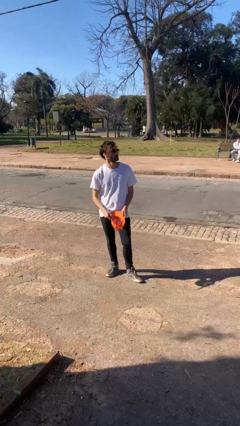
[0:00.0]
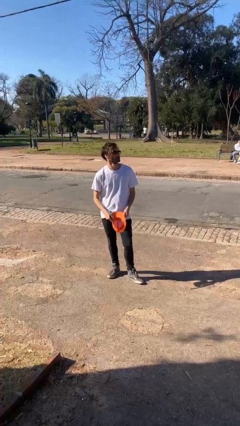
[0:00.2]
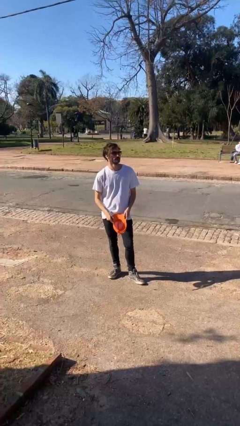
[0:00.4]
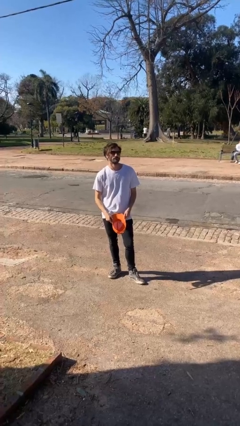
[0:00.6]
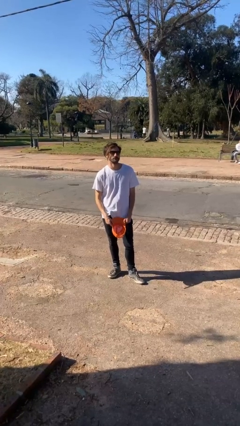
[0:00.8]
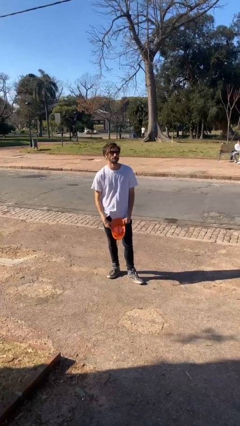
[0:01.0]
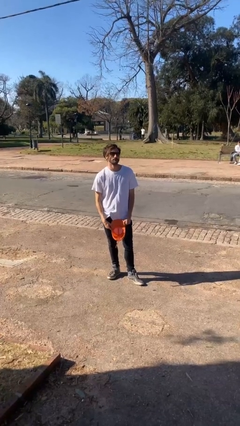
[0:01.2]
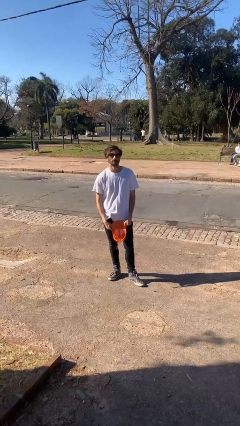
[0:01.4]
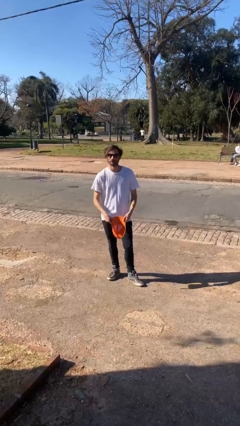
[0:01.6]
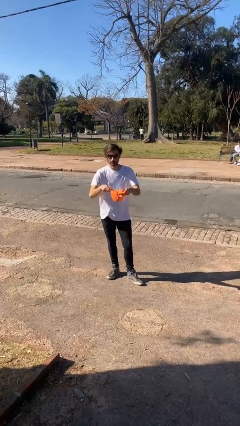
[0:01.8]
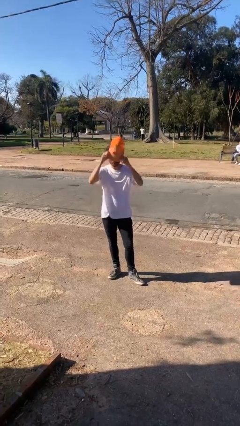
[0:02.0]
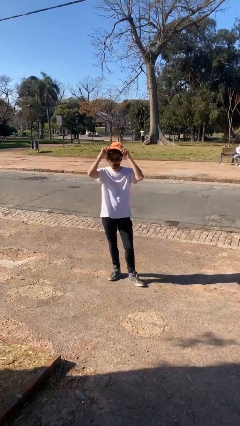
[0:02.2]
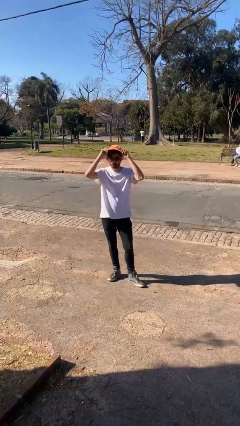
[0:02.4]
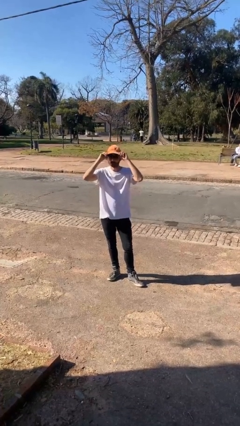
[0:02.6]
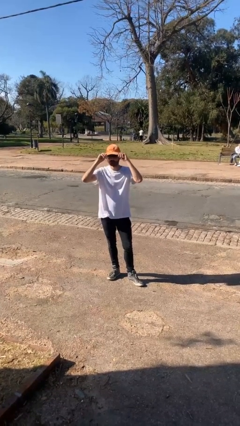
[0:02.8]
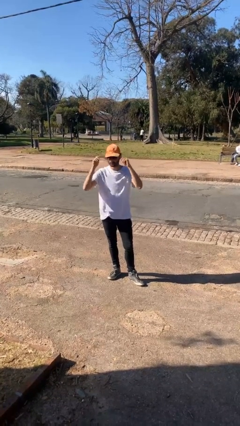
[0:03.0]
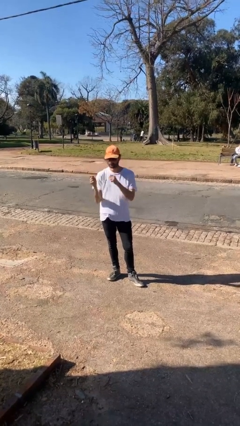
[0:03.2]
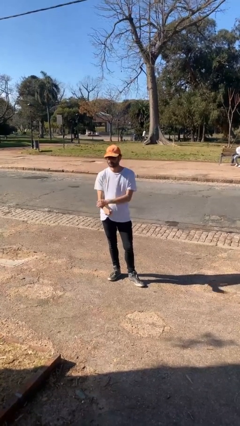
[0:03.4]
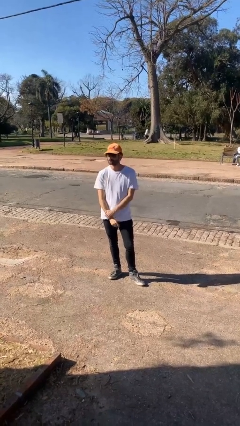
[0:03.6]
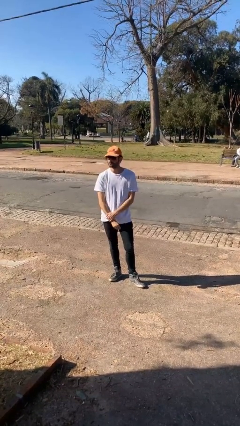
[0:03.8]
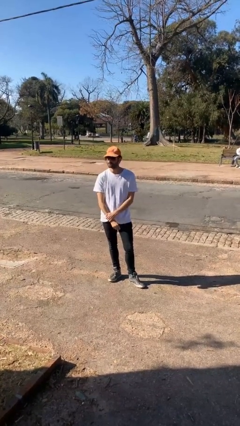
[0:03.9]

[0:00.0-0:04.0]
person puts on hat

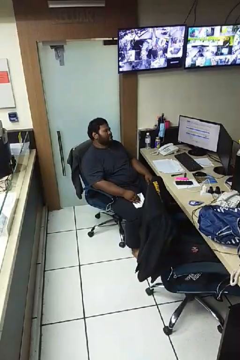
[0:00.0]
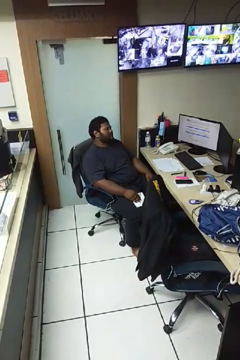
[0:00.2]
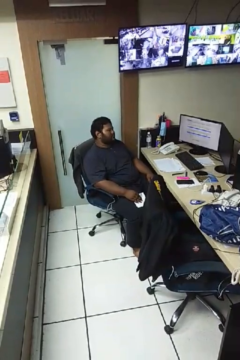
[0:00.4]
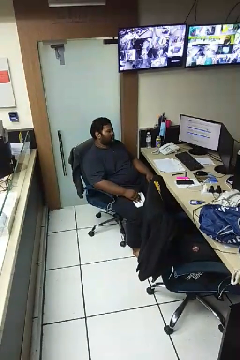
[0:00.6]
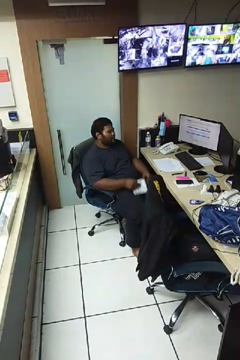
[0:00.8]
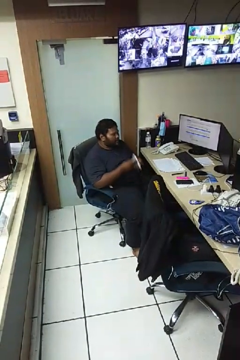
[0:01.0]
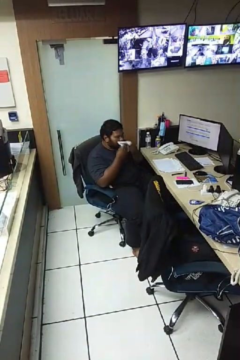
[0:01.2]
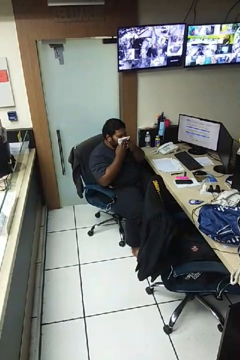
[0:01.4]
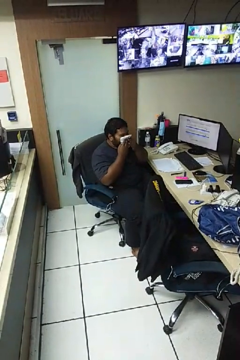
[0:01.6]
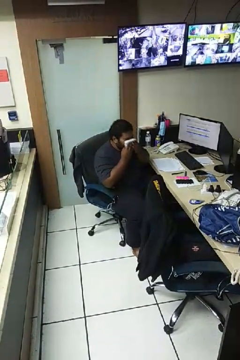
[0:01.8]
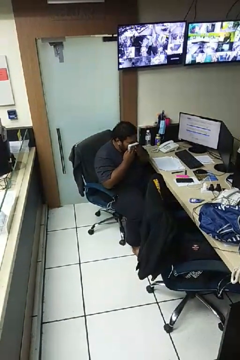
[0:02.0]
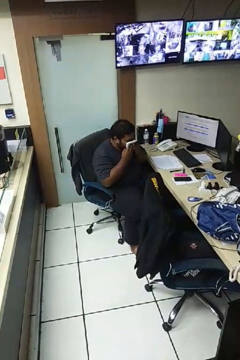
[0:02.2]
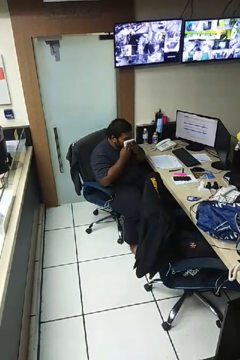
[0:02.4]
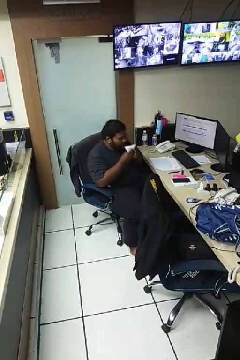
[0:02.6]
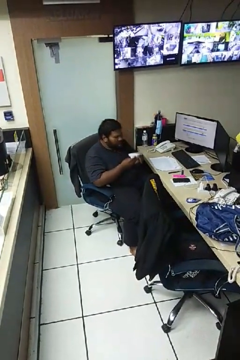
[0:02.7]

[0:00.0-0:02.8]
person blows nose

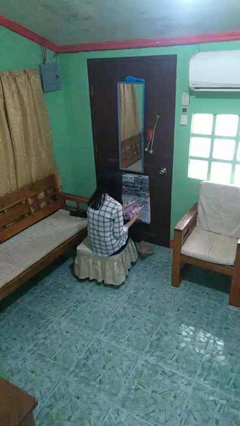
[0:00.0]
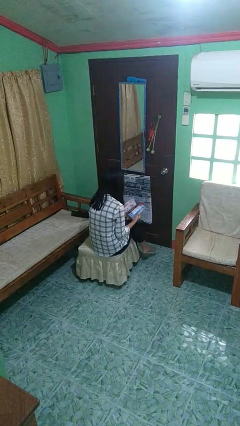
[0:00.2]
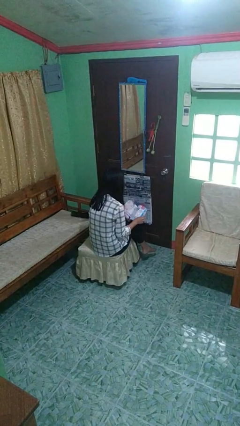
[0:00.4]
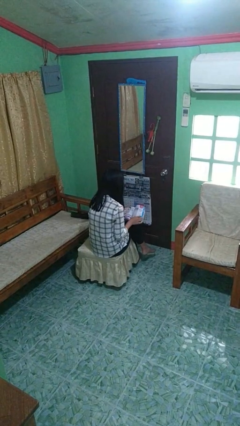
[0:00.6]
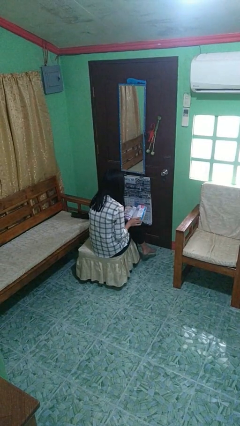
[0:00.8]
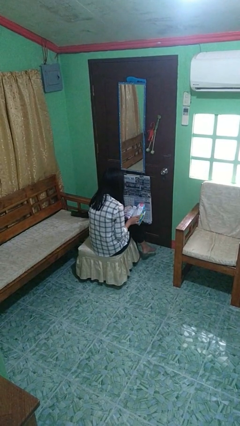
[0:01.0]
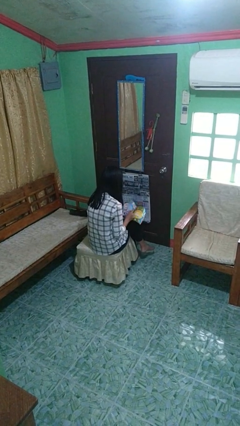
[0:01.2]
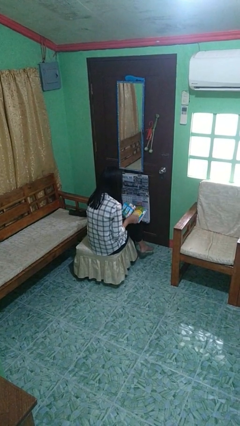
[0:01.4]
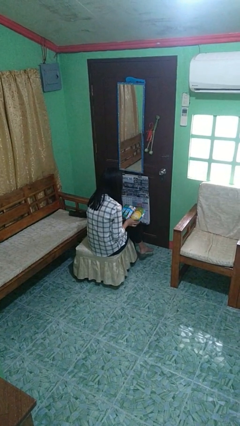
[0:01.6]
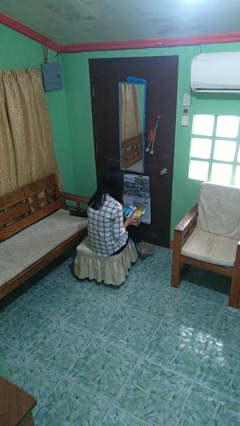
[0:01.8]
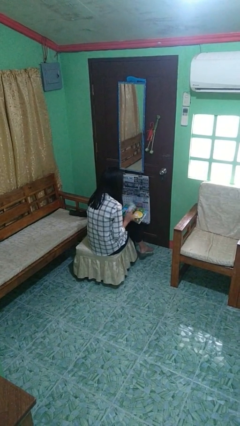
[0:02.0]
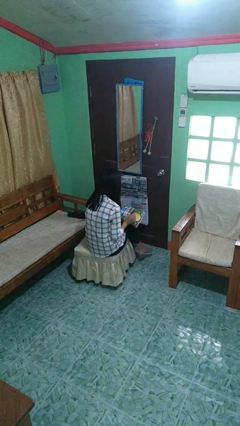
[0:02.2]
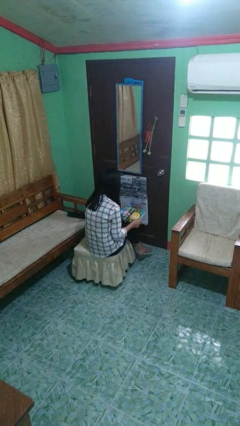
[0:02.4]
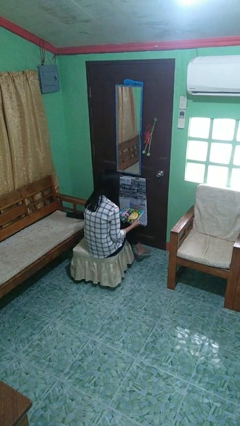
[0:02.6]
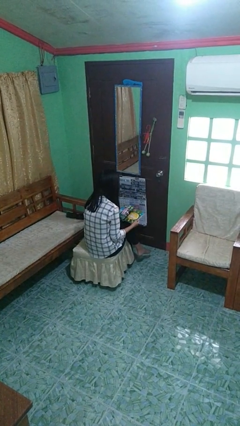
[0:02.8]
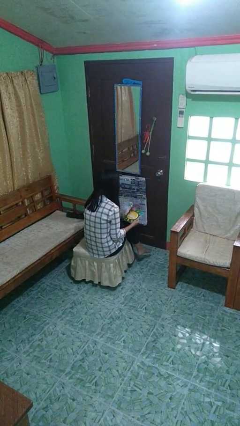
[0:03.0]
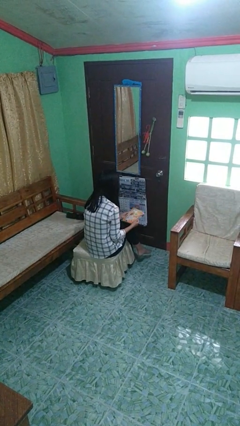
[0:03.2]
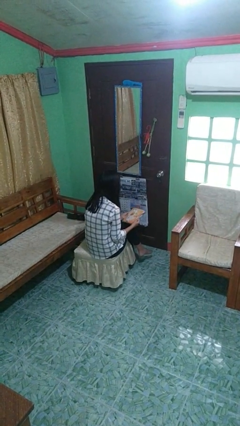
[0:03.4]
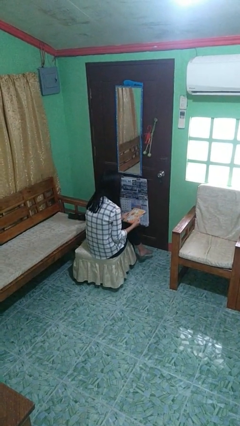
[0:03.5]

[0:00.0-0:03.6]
person reads magazine

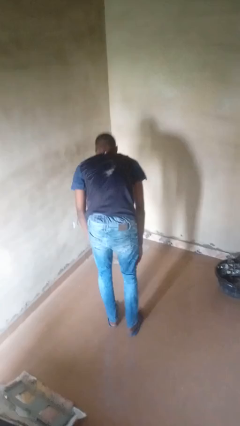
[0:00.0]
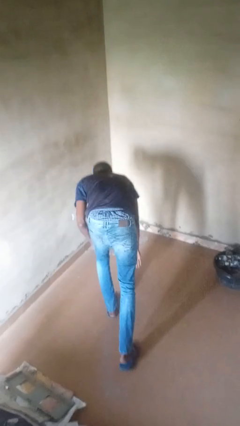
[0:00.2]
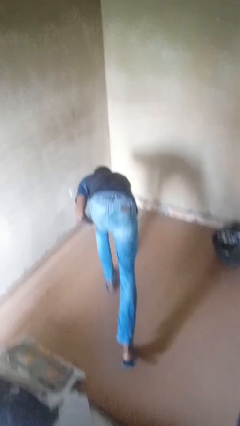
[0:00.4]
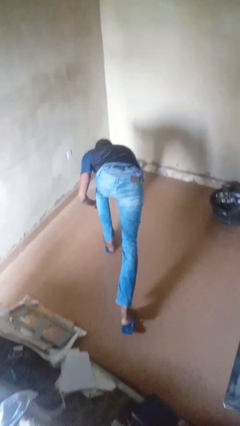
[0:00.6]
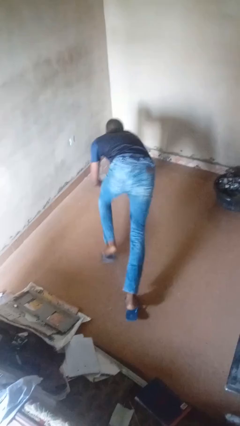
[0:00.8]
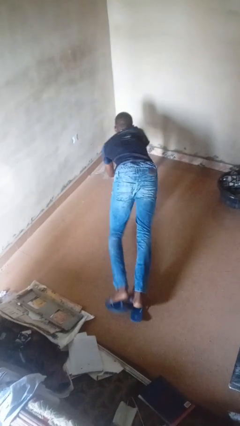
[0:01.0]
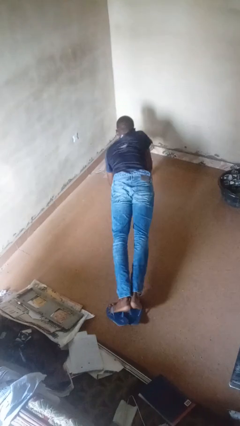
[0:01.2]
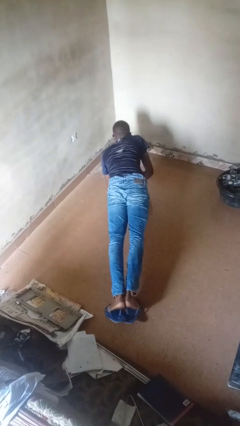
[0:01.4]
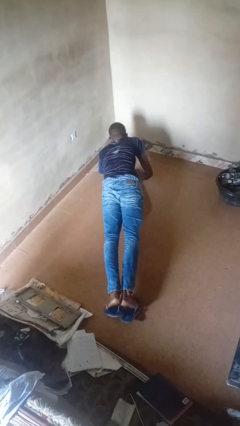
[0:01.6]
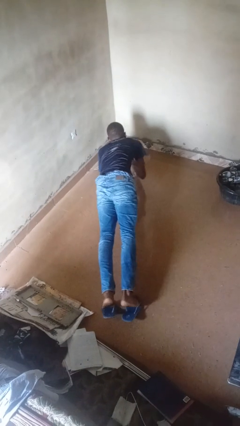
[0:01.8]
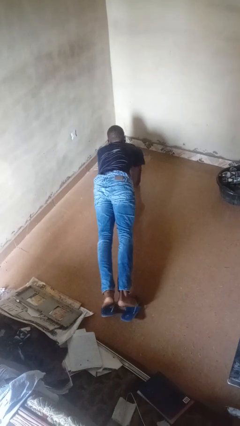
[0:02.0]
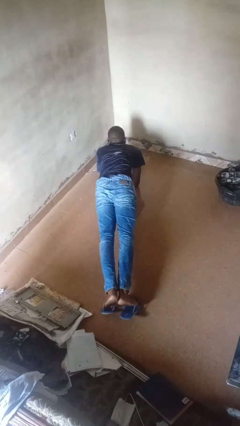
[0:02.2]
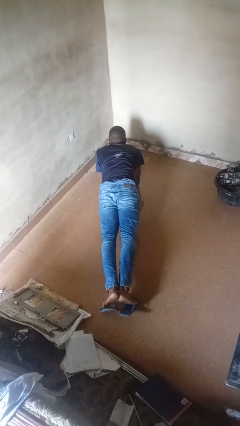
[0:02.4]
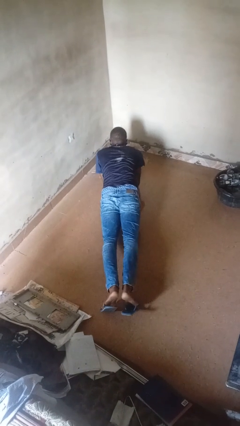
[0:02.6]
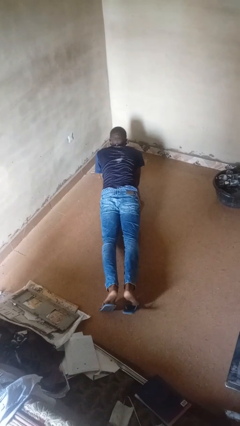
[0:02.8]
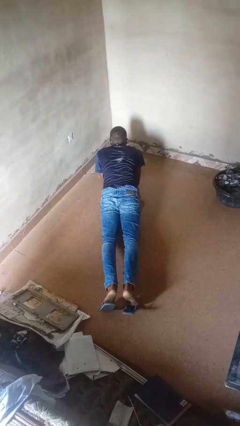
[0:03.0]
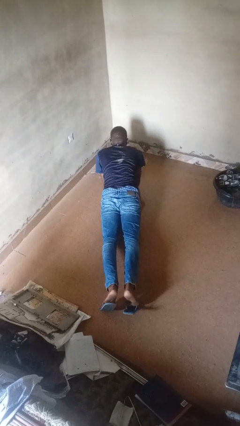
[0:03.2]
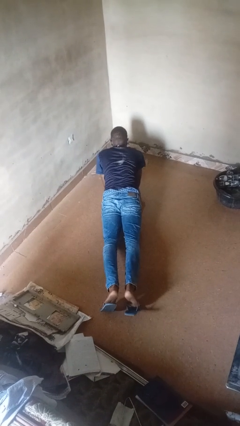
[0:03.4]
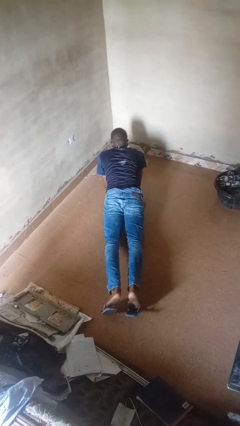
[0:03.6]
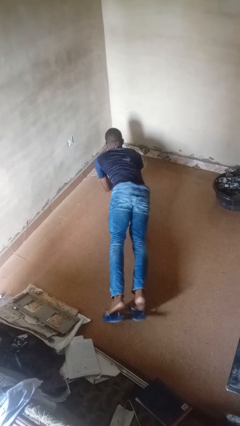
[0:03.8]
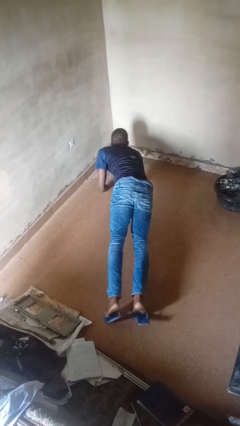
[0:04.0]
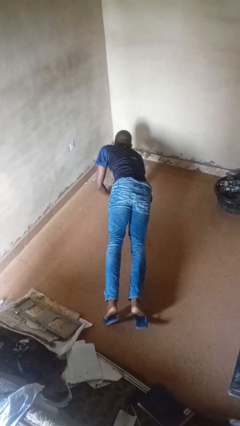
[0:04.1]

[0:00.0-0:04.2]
person exercises with plank

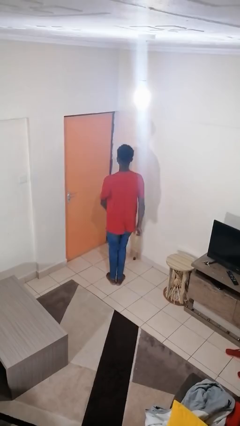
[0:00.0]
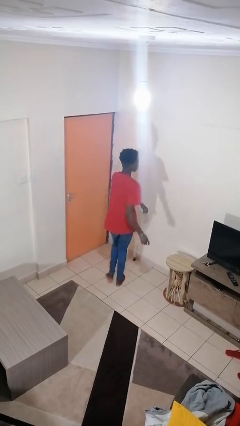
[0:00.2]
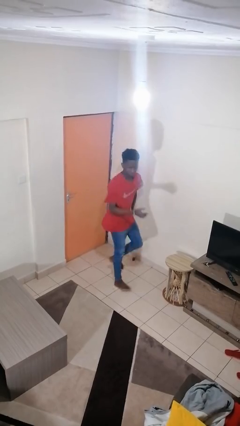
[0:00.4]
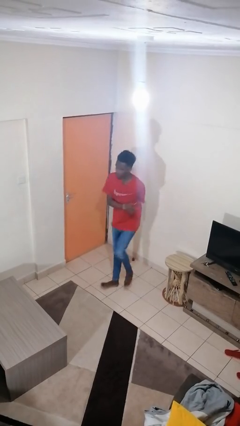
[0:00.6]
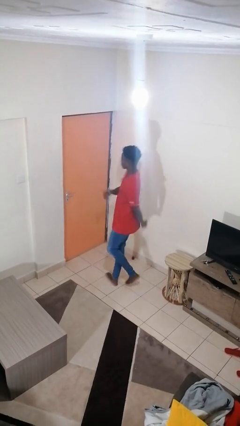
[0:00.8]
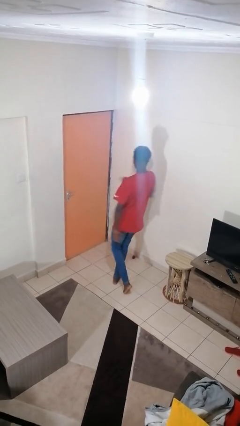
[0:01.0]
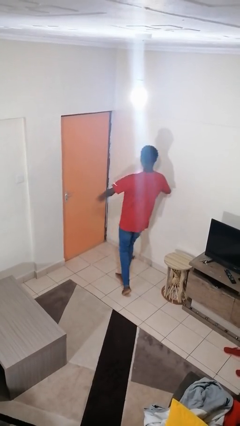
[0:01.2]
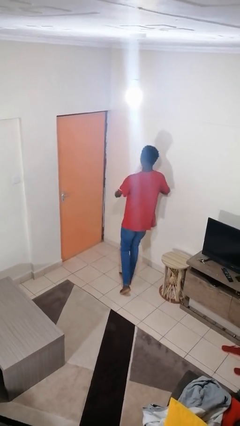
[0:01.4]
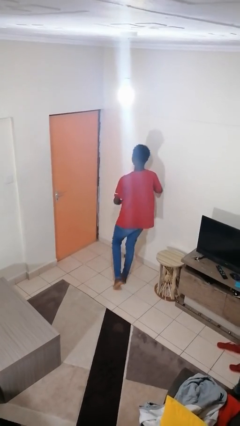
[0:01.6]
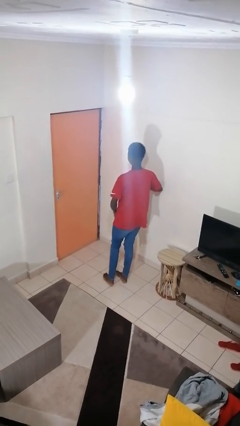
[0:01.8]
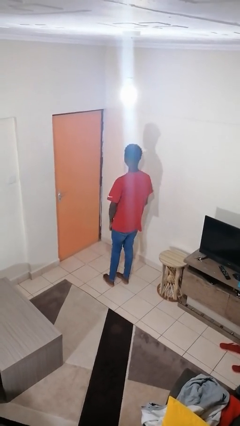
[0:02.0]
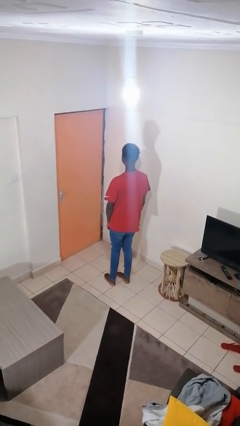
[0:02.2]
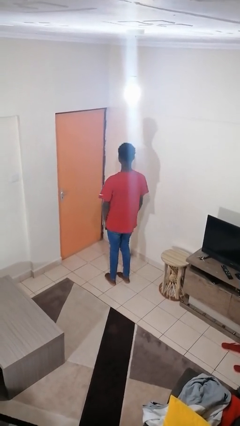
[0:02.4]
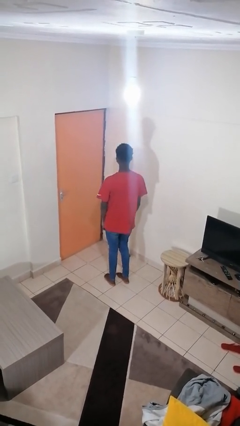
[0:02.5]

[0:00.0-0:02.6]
person twirls

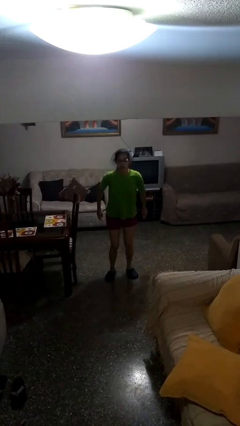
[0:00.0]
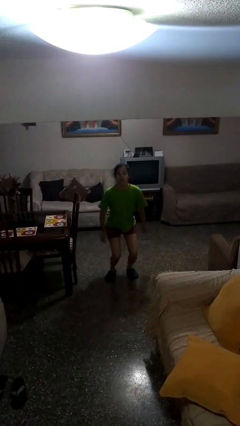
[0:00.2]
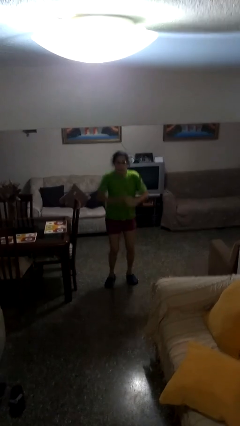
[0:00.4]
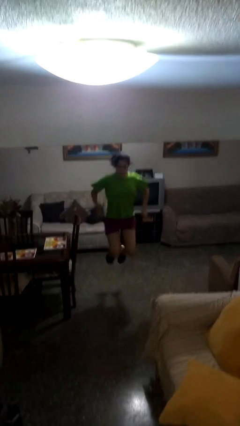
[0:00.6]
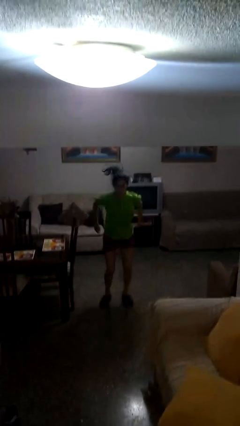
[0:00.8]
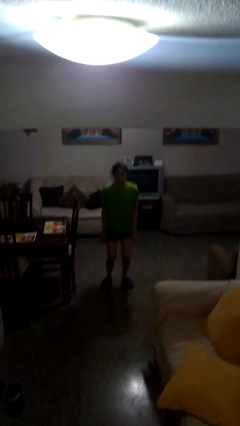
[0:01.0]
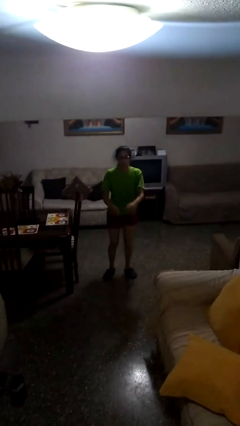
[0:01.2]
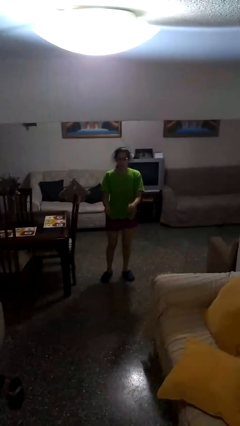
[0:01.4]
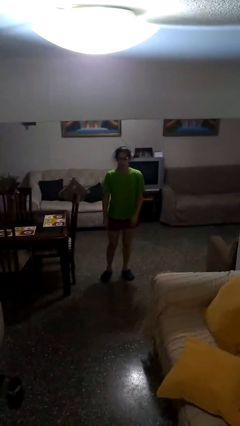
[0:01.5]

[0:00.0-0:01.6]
person jumps
